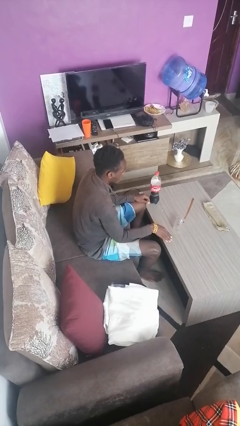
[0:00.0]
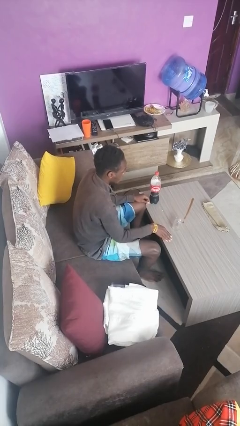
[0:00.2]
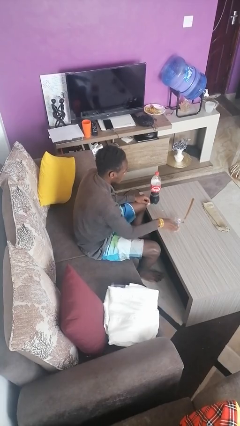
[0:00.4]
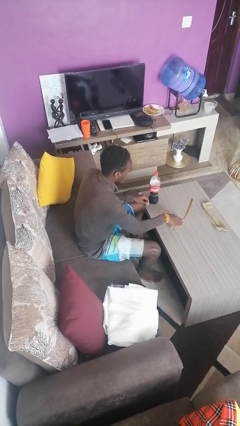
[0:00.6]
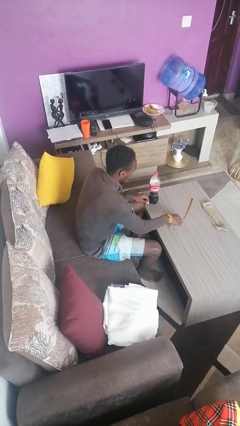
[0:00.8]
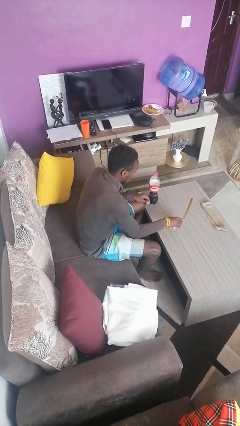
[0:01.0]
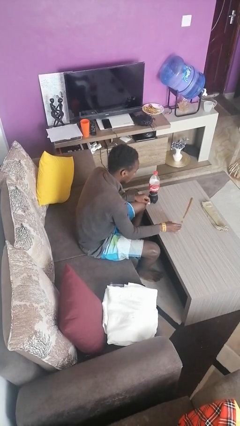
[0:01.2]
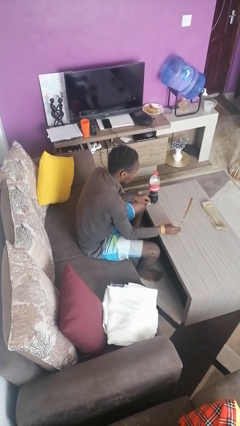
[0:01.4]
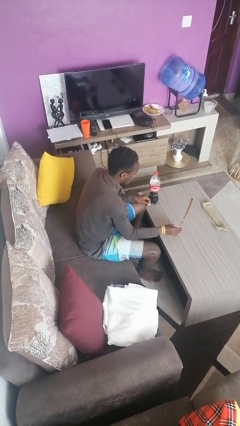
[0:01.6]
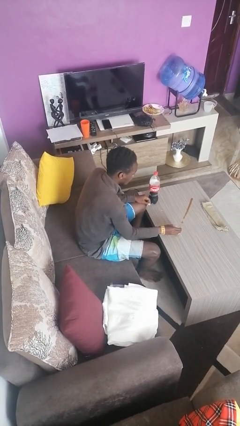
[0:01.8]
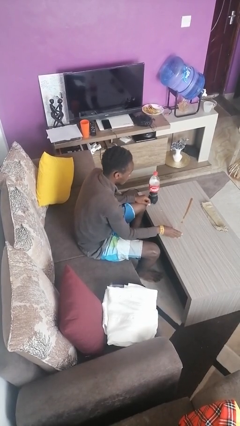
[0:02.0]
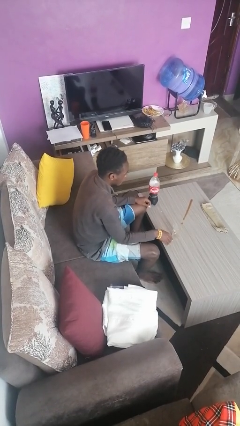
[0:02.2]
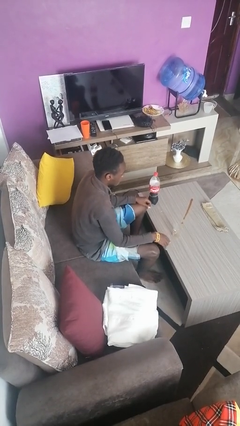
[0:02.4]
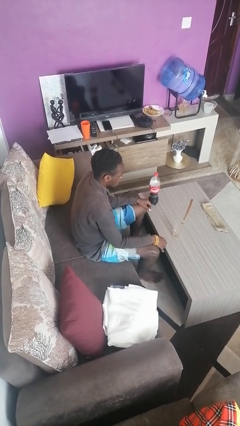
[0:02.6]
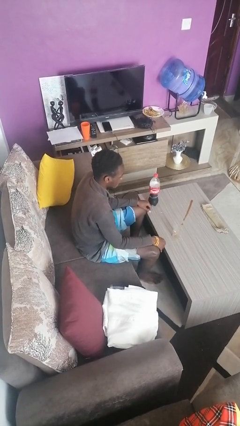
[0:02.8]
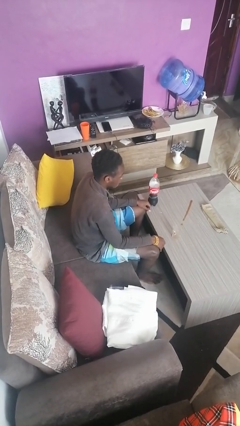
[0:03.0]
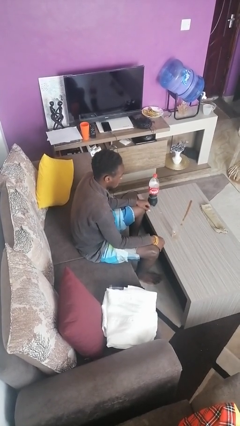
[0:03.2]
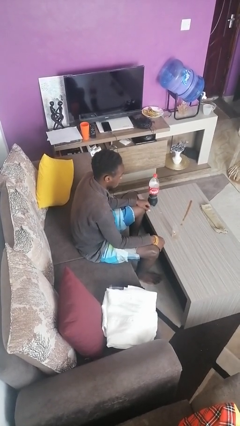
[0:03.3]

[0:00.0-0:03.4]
person sets upright glass

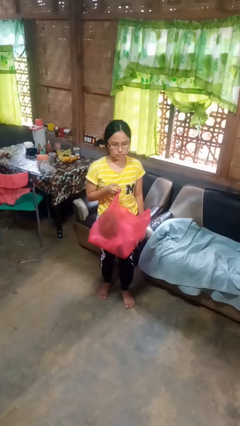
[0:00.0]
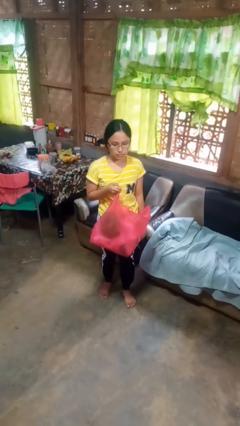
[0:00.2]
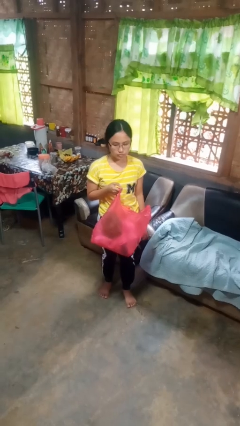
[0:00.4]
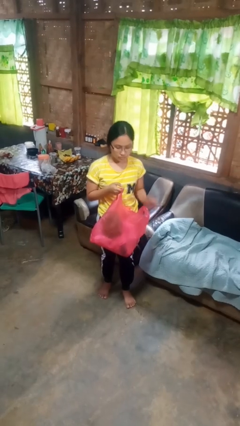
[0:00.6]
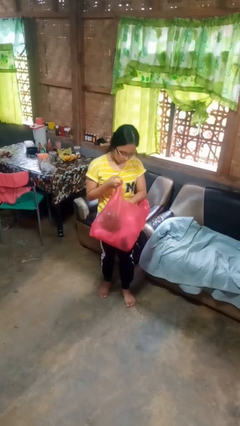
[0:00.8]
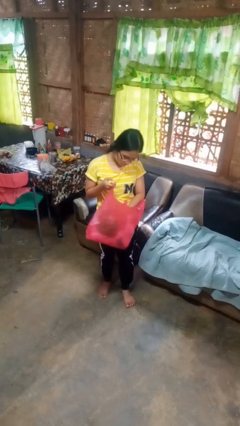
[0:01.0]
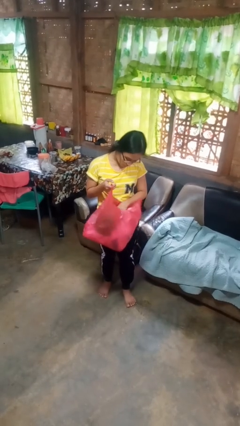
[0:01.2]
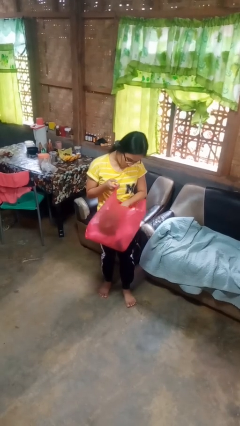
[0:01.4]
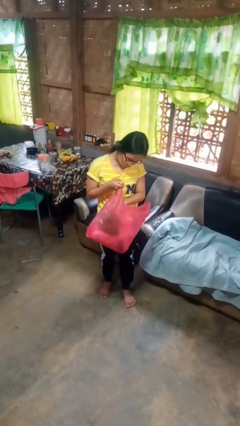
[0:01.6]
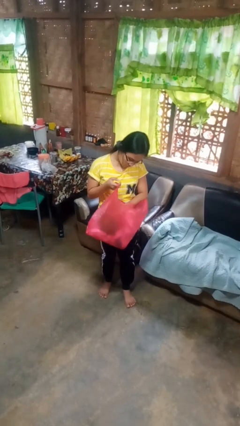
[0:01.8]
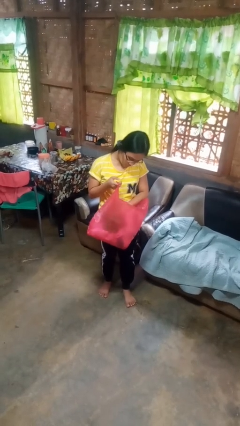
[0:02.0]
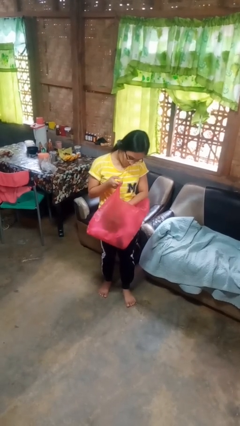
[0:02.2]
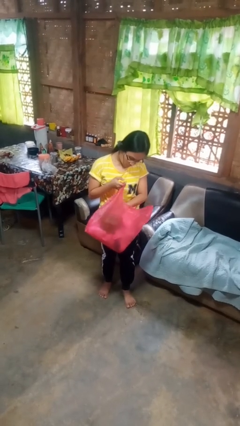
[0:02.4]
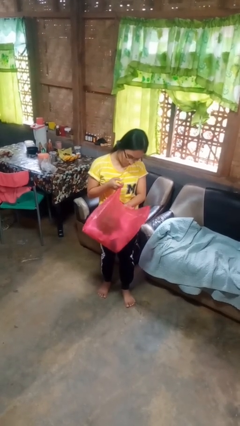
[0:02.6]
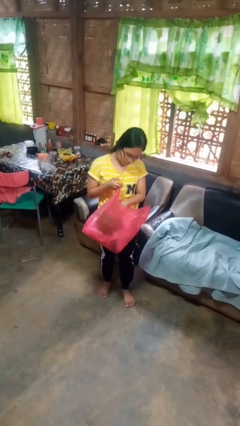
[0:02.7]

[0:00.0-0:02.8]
person searches in bag

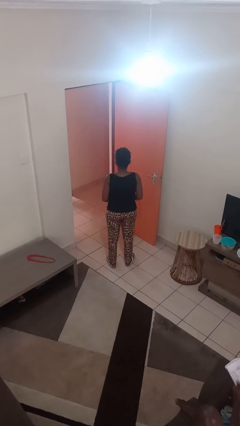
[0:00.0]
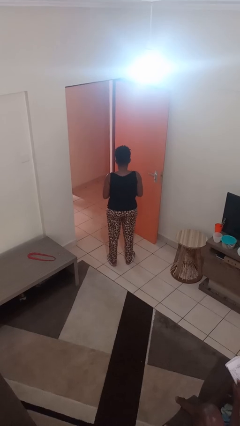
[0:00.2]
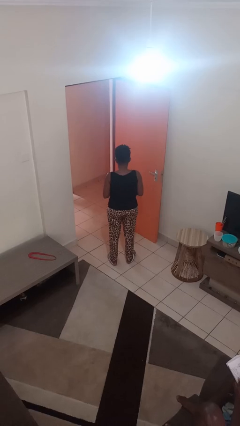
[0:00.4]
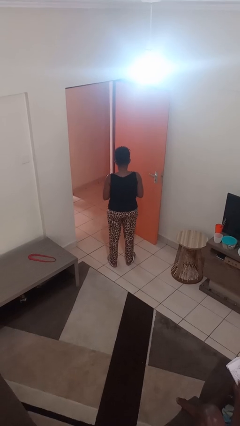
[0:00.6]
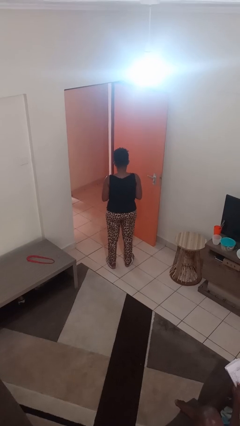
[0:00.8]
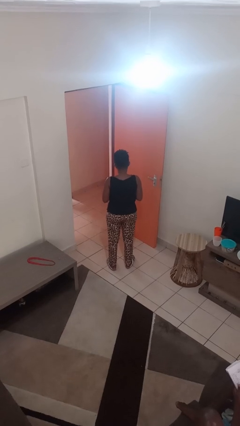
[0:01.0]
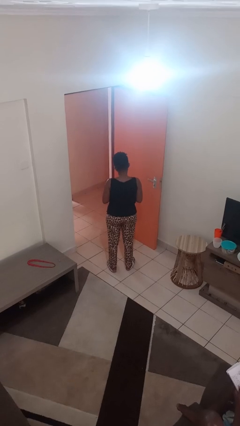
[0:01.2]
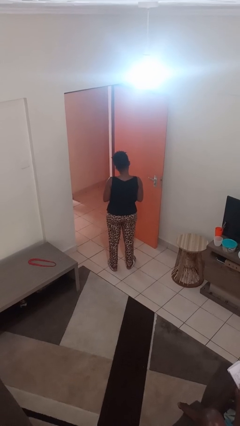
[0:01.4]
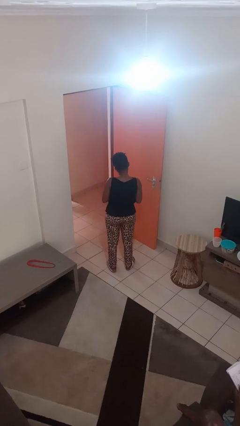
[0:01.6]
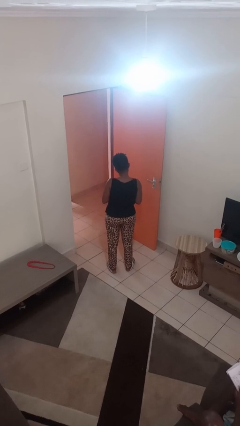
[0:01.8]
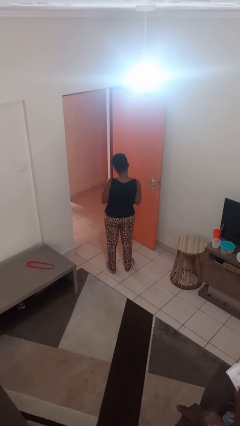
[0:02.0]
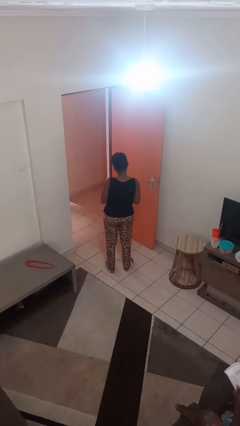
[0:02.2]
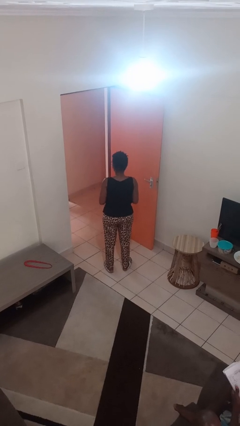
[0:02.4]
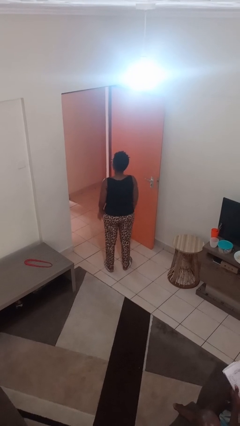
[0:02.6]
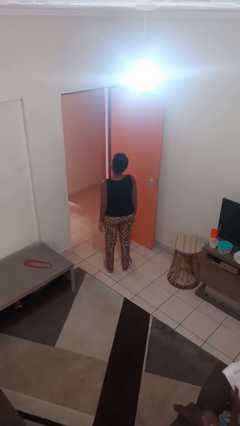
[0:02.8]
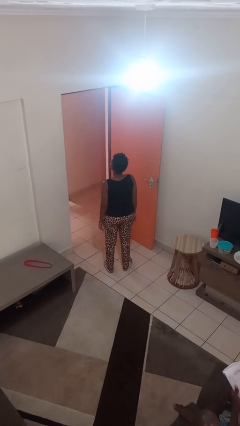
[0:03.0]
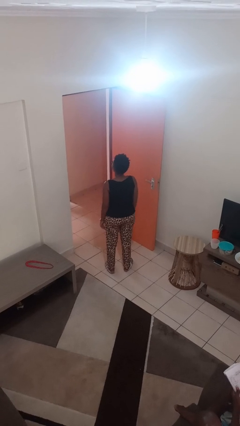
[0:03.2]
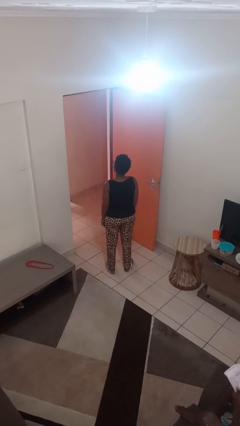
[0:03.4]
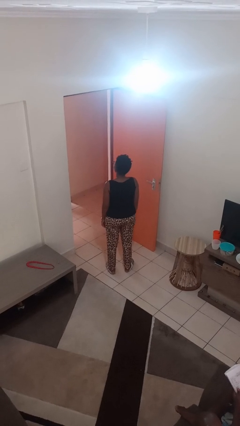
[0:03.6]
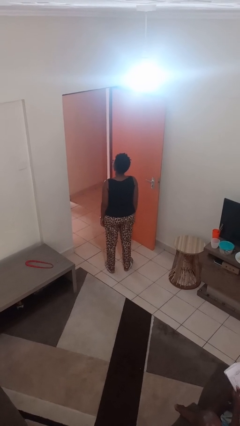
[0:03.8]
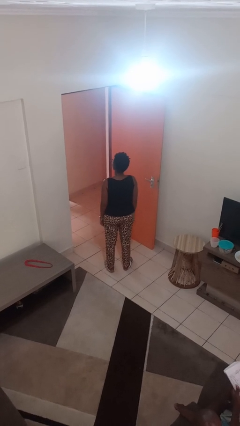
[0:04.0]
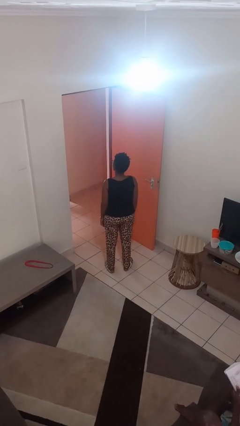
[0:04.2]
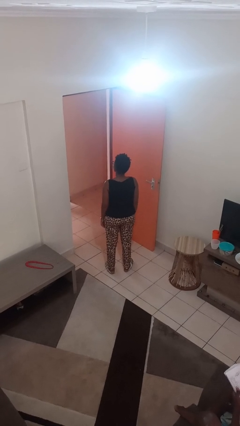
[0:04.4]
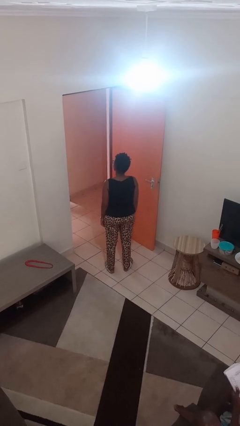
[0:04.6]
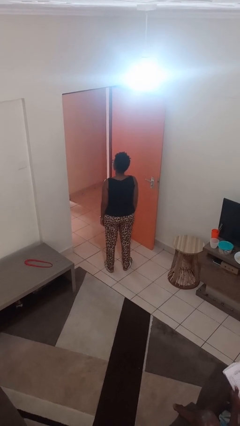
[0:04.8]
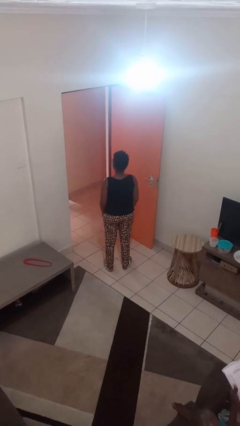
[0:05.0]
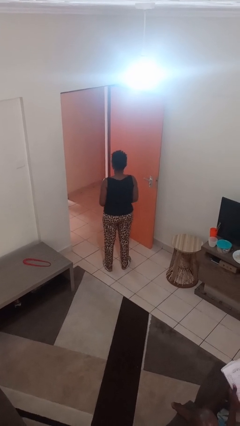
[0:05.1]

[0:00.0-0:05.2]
person puts on ring

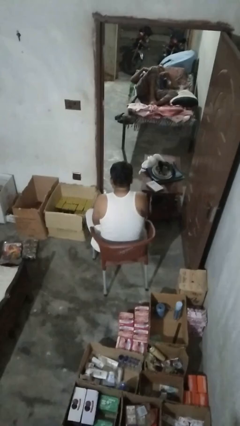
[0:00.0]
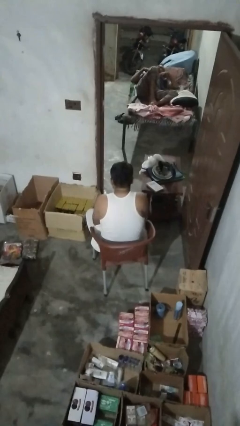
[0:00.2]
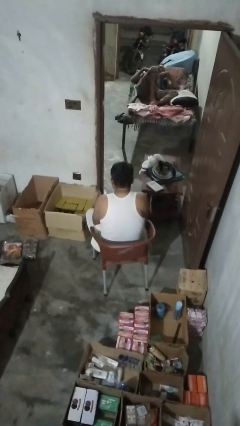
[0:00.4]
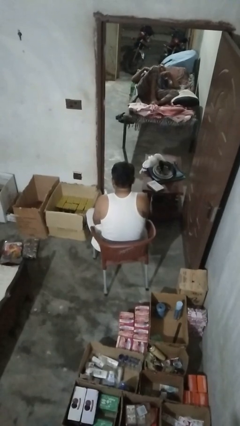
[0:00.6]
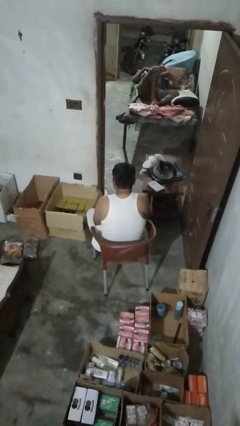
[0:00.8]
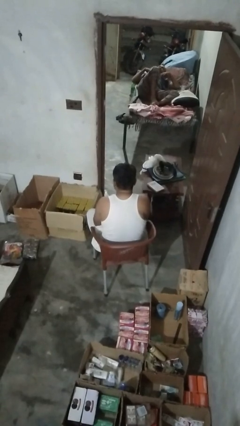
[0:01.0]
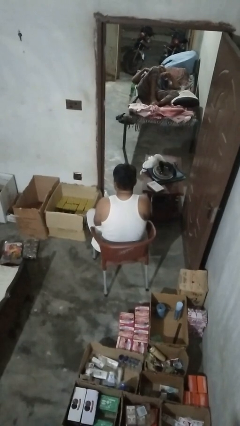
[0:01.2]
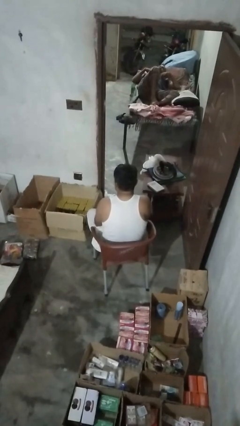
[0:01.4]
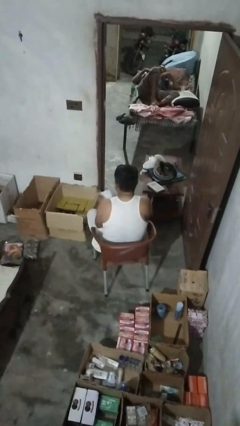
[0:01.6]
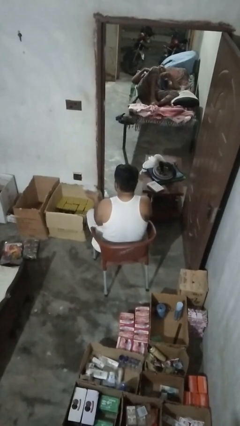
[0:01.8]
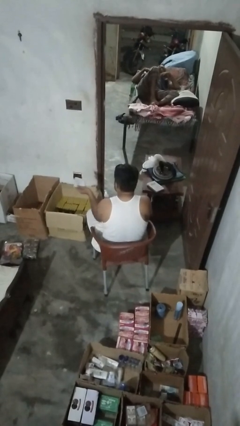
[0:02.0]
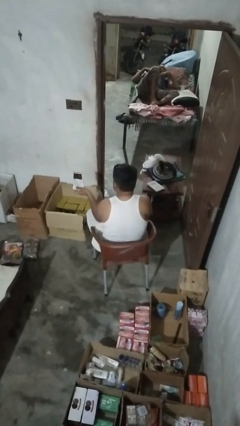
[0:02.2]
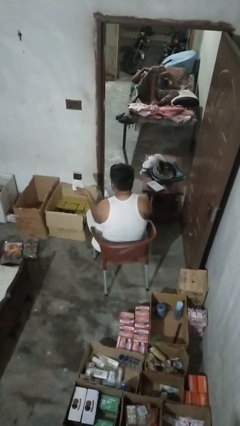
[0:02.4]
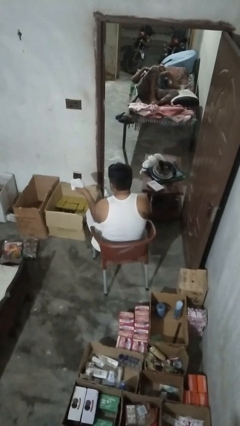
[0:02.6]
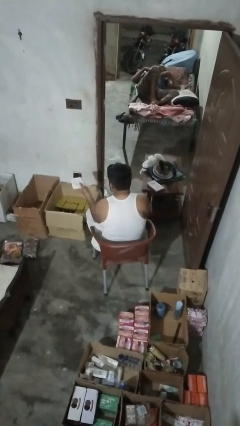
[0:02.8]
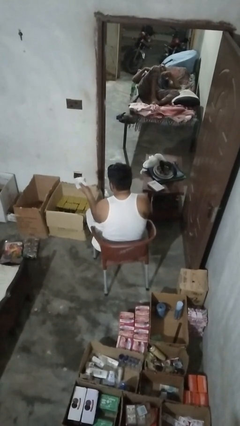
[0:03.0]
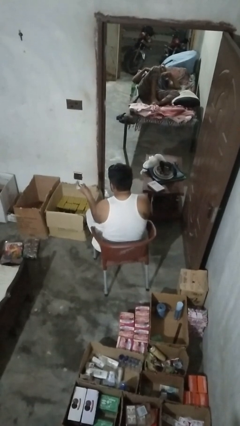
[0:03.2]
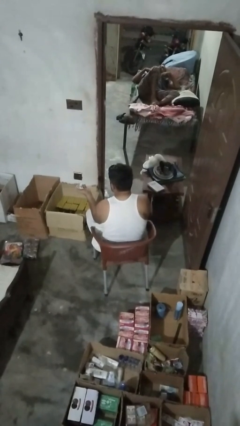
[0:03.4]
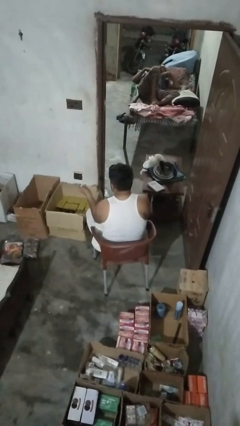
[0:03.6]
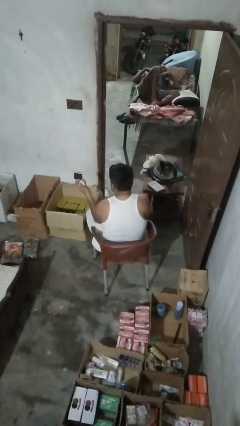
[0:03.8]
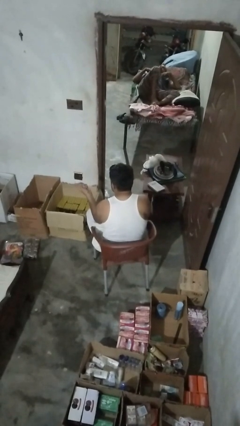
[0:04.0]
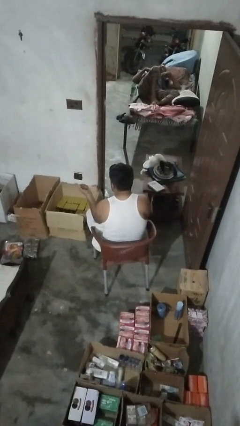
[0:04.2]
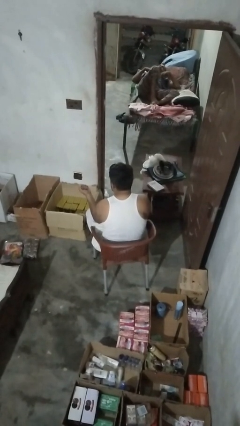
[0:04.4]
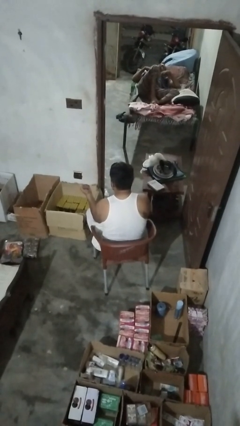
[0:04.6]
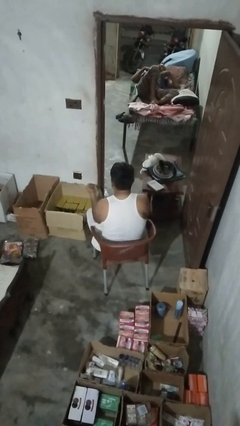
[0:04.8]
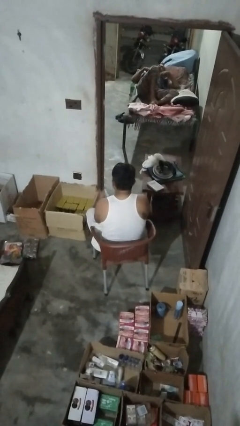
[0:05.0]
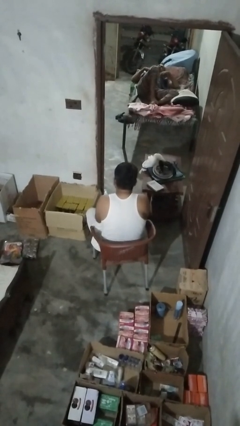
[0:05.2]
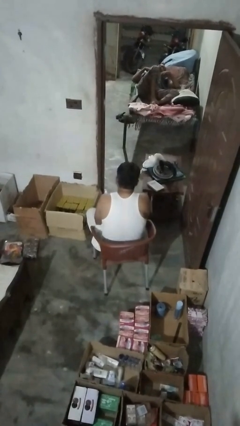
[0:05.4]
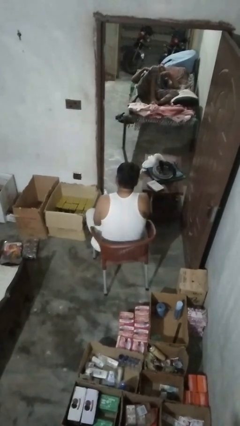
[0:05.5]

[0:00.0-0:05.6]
person crumples paper

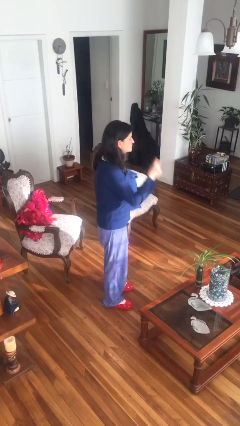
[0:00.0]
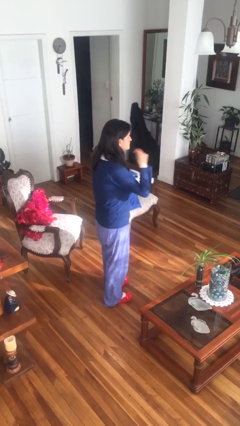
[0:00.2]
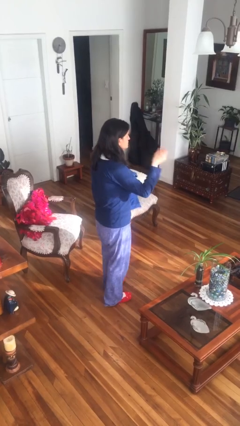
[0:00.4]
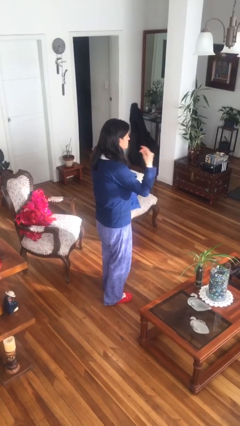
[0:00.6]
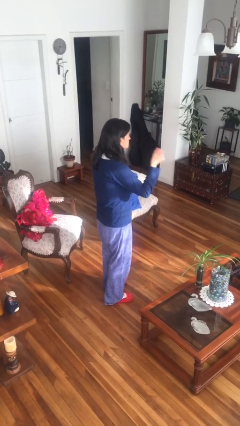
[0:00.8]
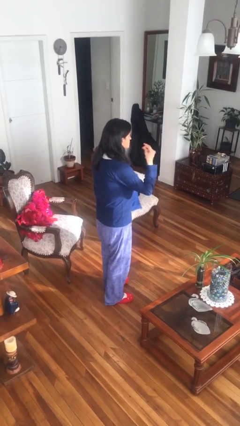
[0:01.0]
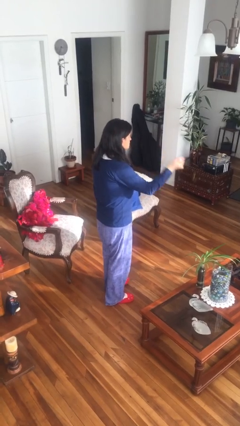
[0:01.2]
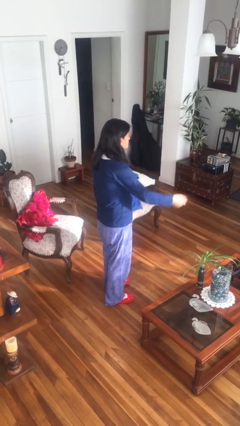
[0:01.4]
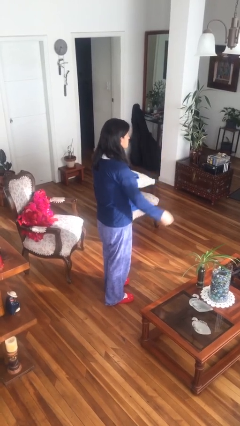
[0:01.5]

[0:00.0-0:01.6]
person snaps fingers
